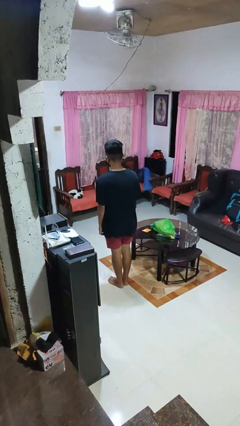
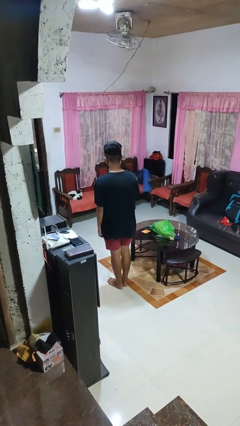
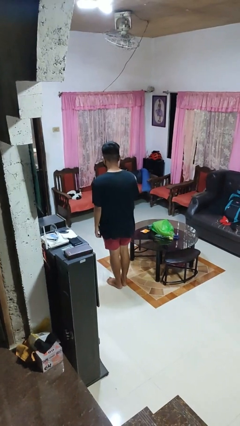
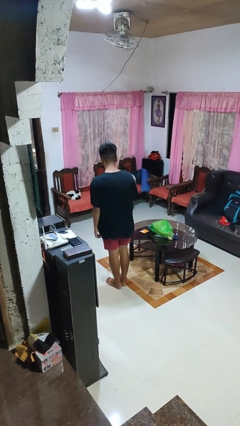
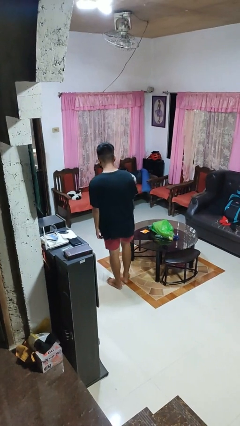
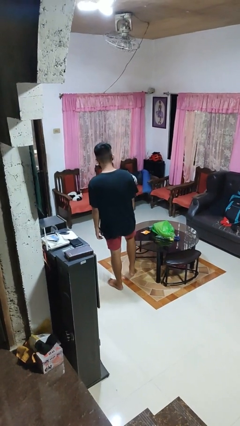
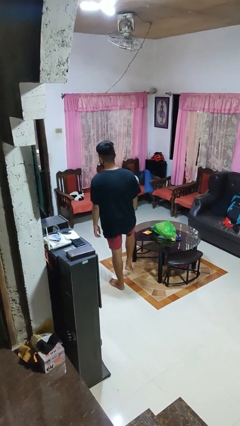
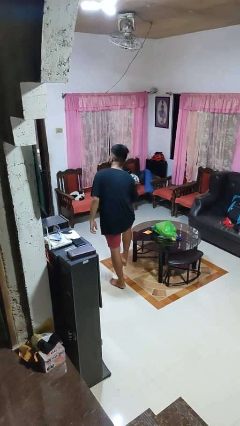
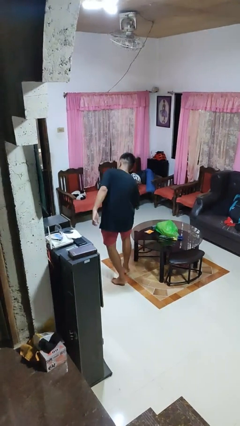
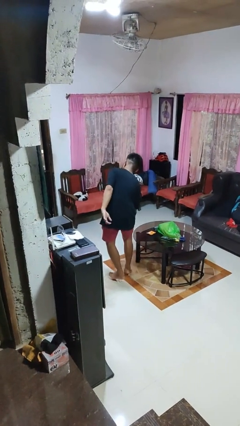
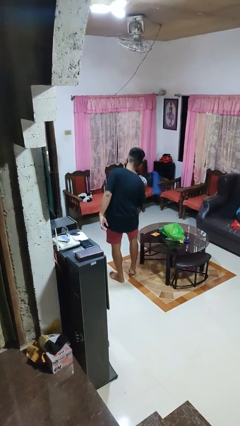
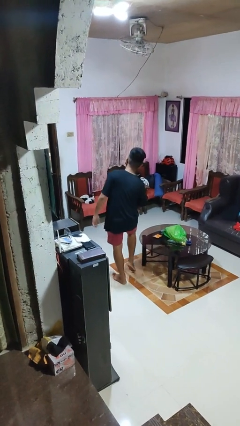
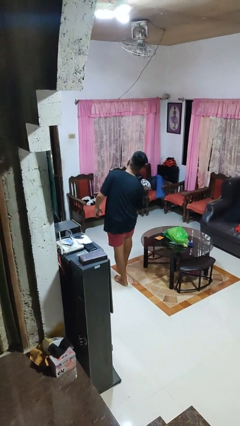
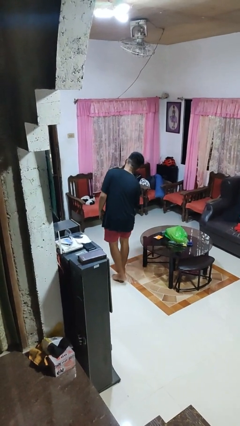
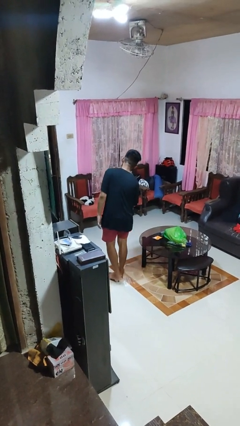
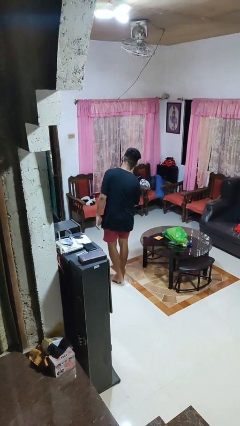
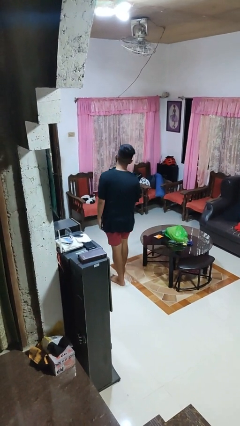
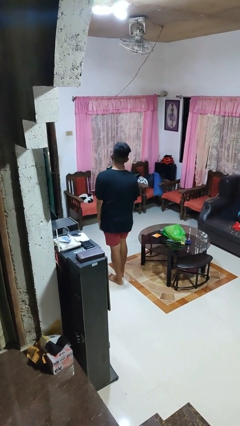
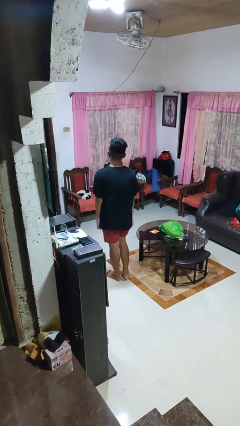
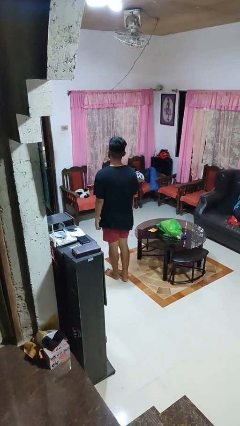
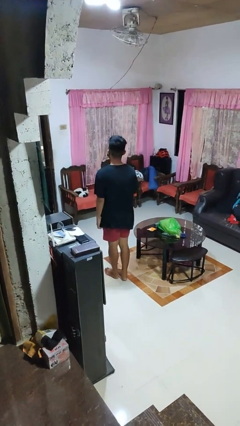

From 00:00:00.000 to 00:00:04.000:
person bumps into table

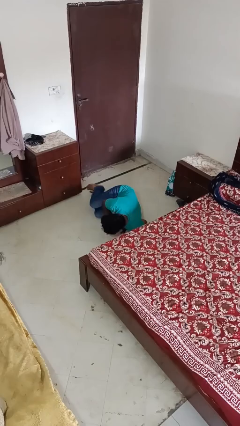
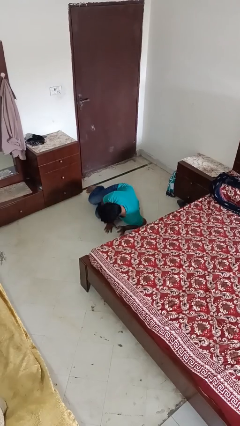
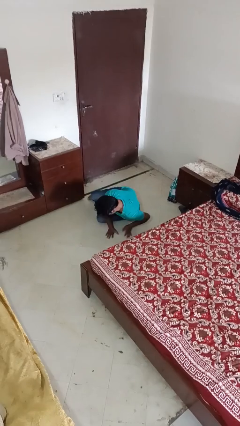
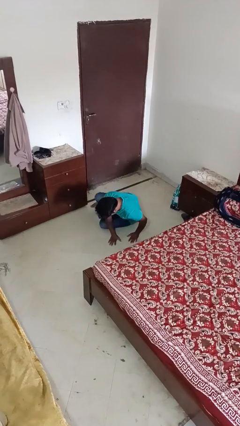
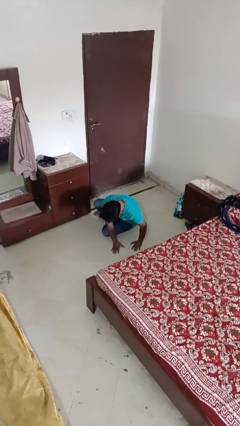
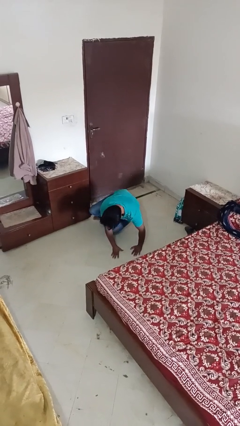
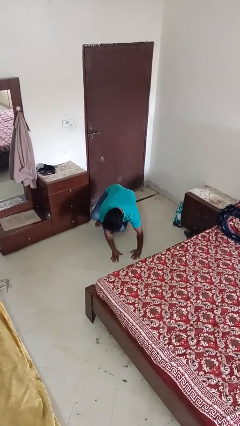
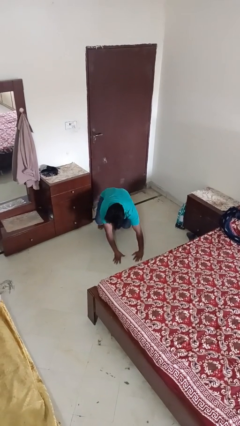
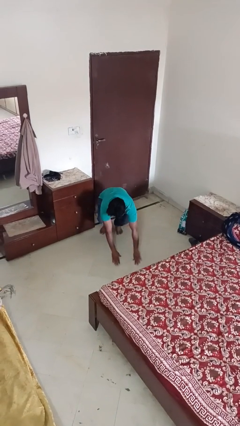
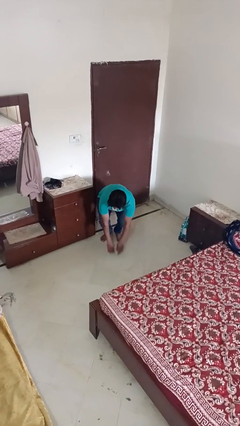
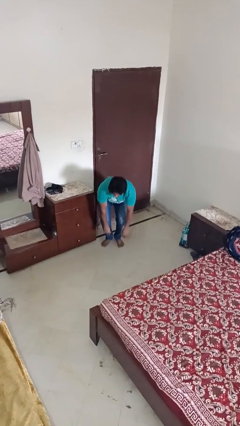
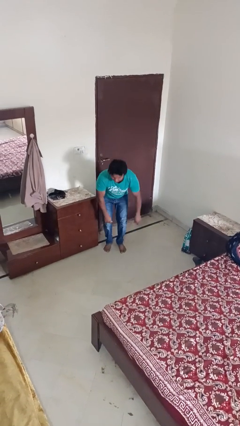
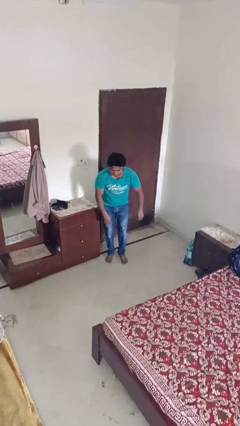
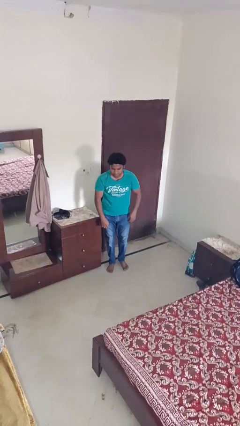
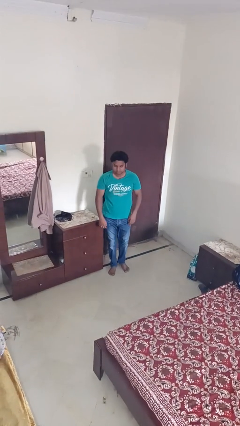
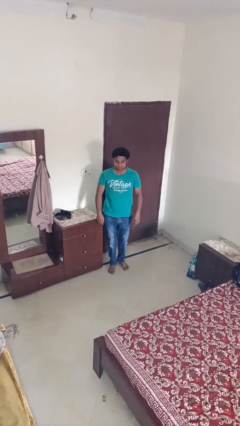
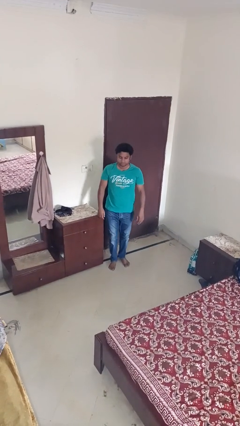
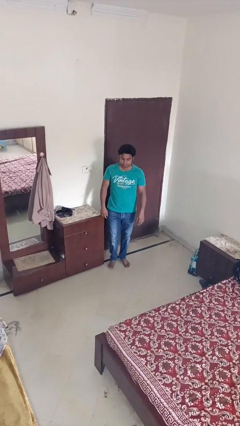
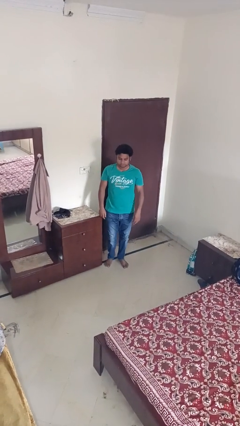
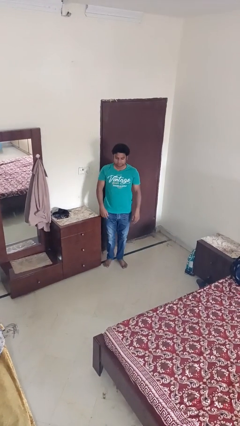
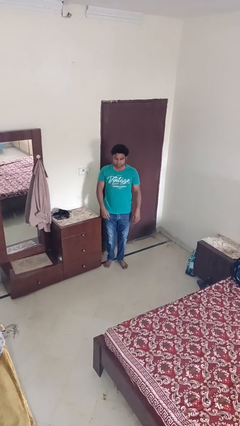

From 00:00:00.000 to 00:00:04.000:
person stands up from floor

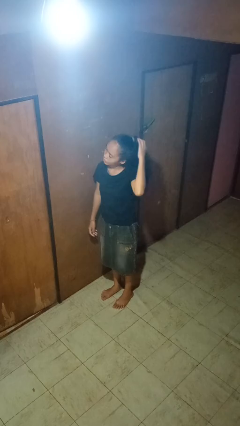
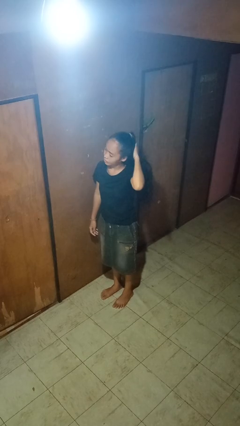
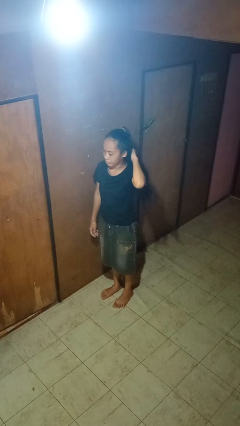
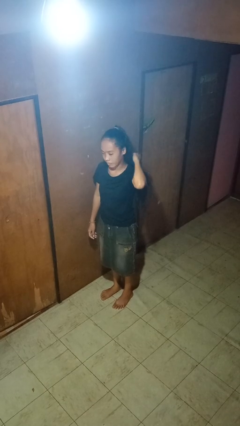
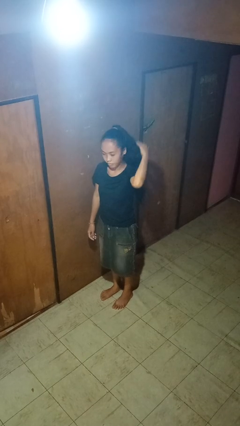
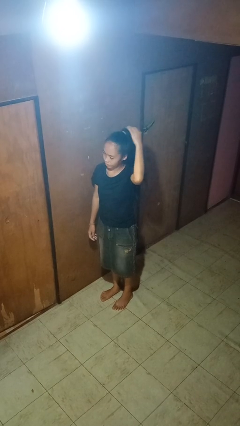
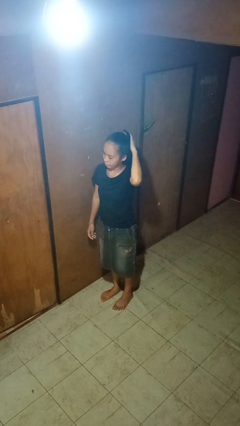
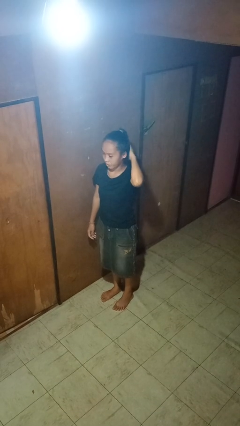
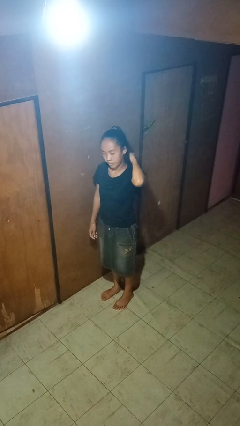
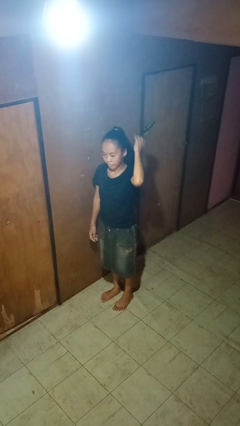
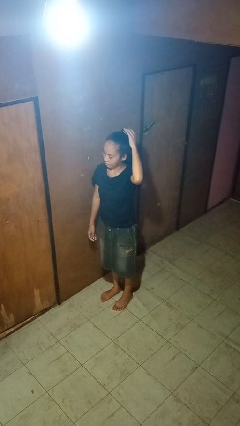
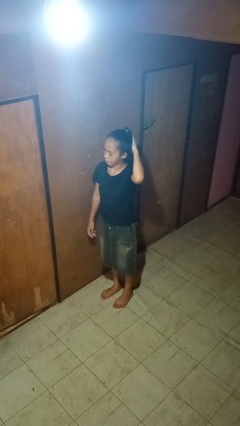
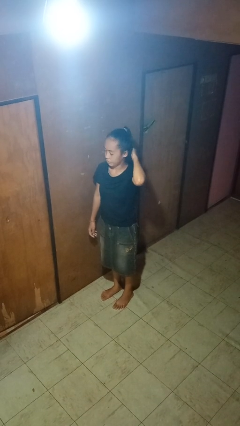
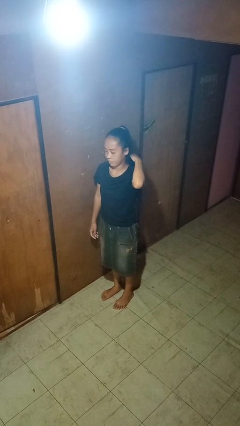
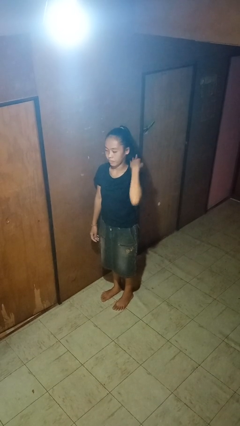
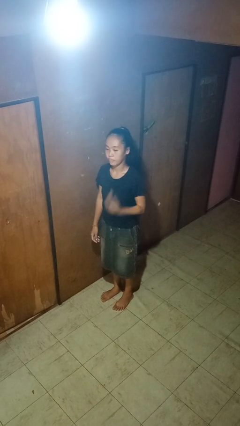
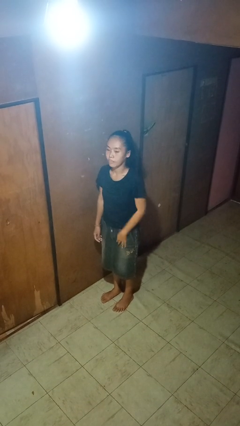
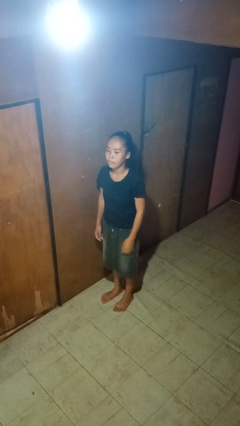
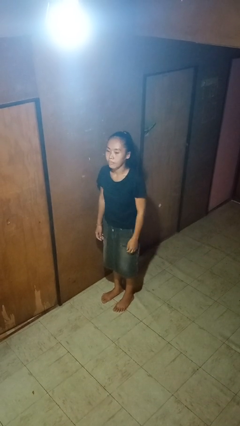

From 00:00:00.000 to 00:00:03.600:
person strokes hair

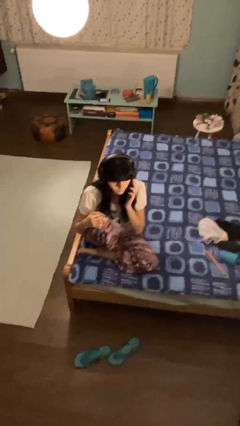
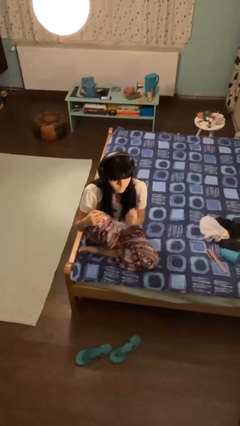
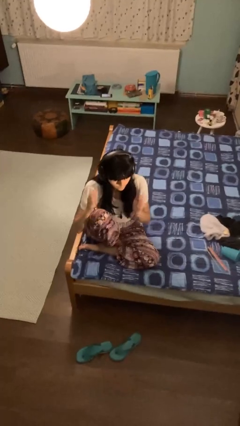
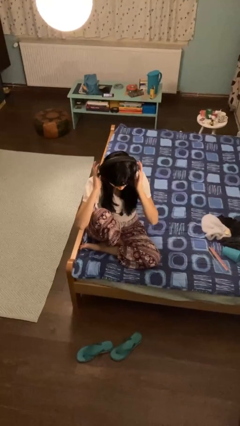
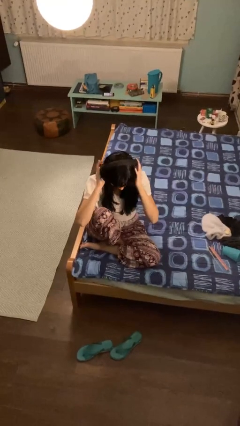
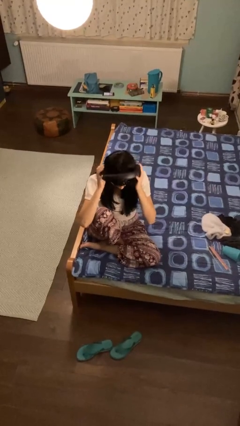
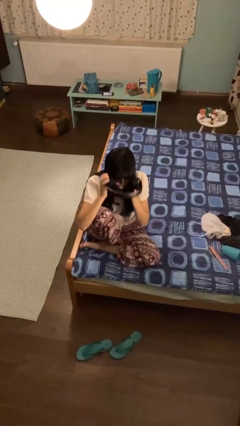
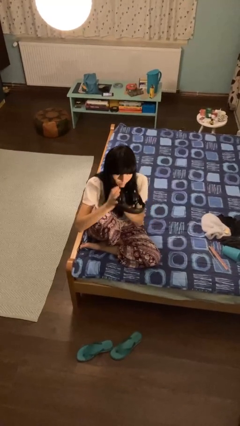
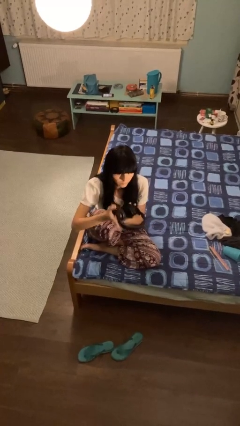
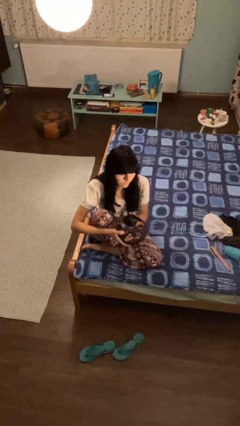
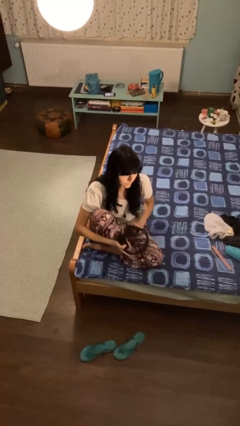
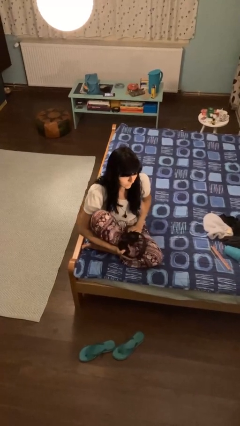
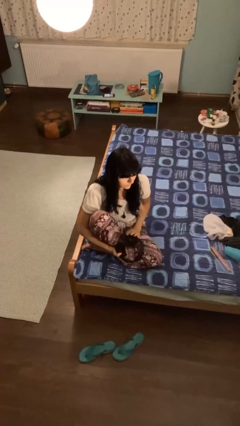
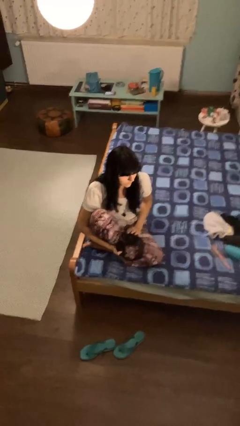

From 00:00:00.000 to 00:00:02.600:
person takes off headphones

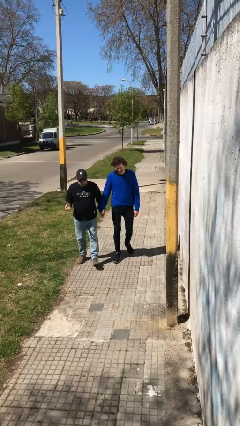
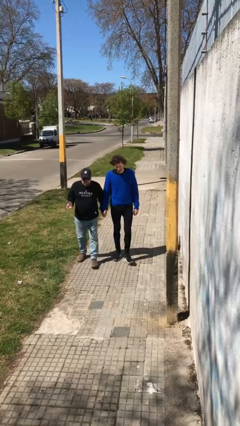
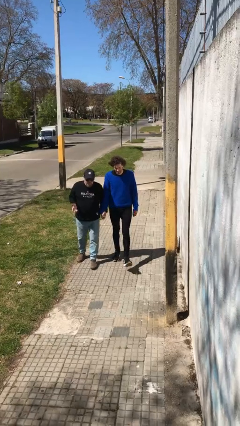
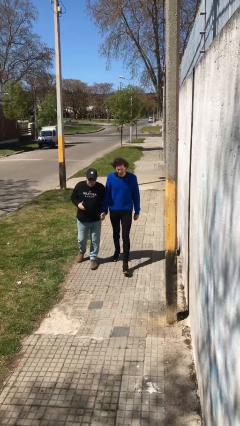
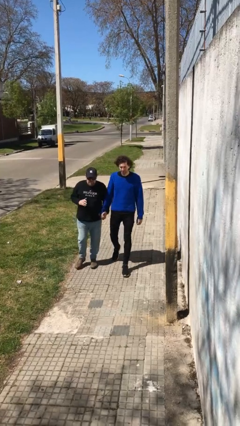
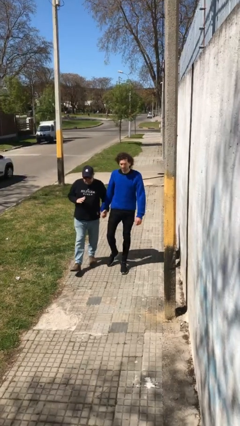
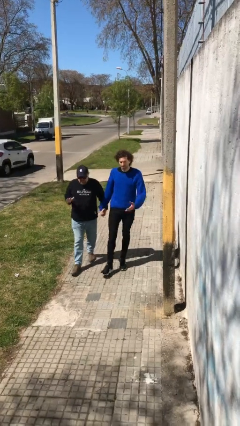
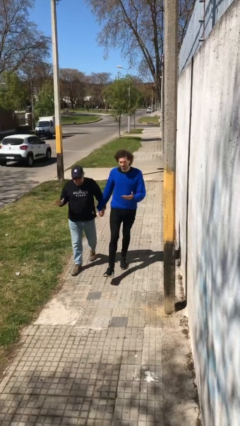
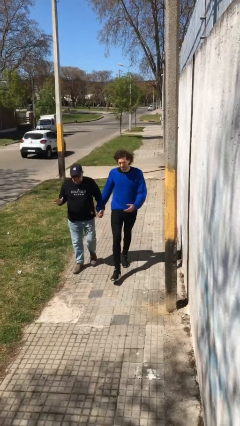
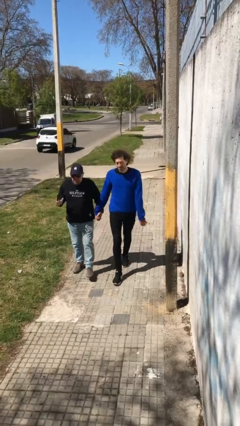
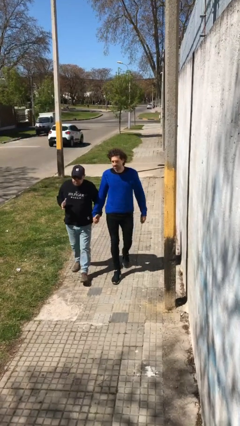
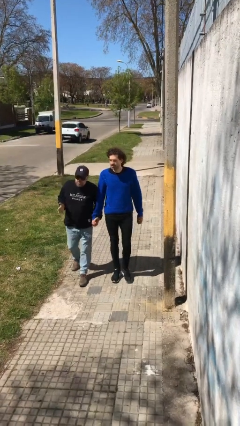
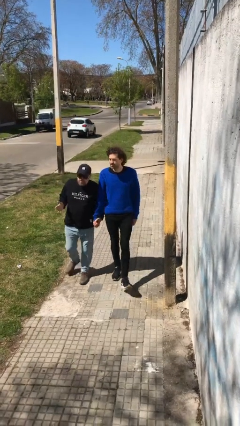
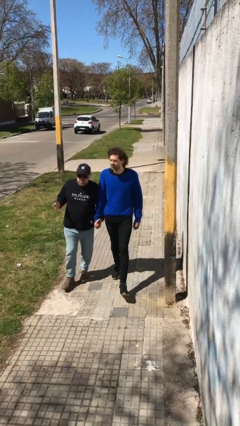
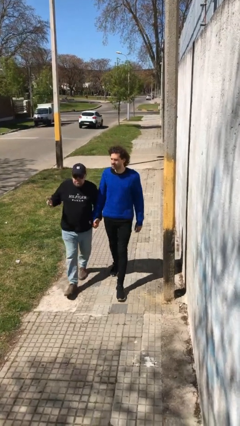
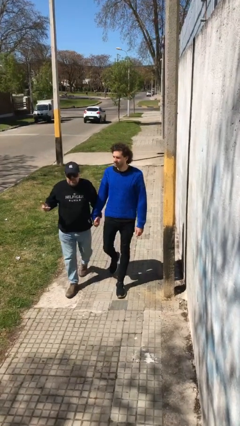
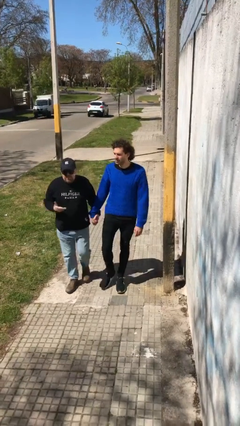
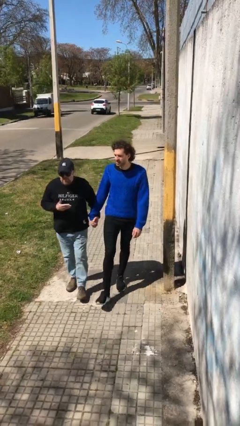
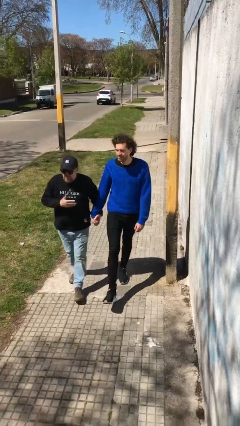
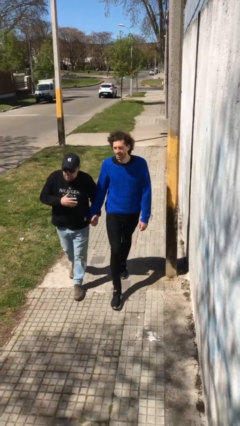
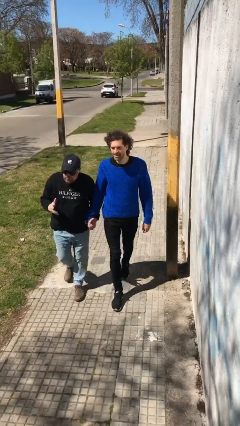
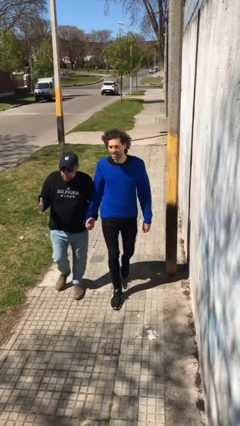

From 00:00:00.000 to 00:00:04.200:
person holds hand
